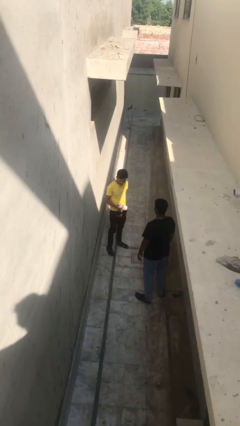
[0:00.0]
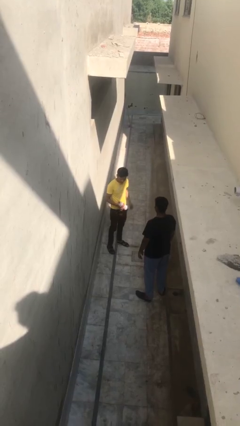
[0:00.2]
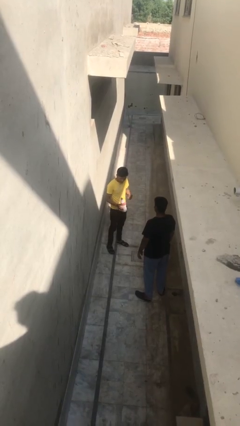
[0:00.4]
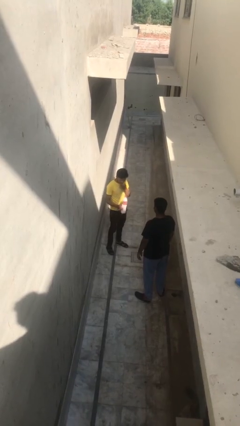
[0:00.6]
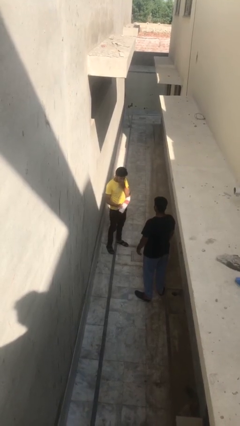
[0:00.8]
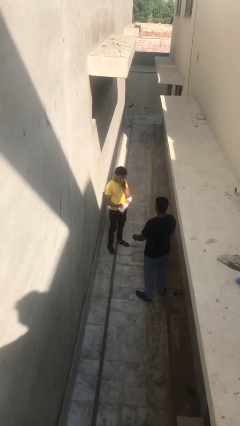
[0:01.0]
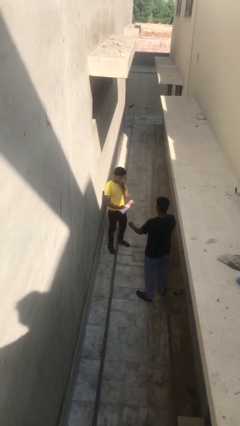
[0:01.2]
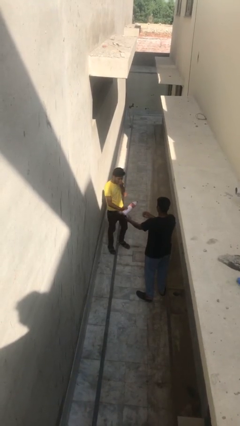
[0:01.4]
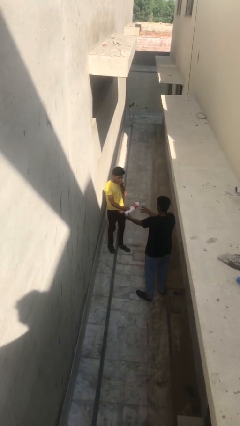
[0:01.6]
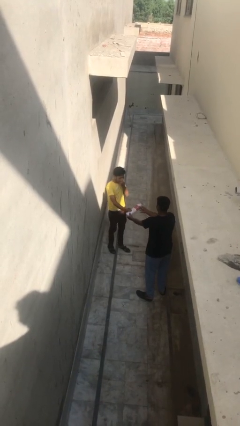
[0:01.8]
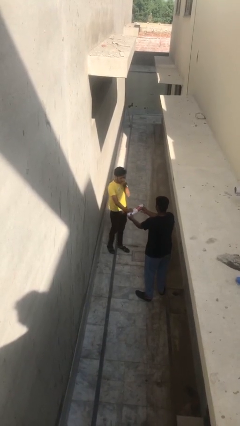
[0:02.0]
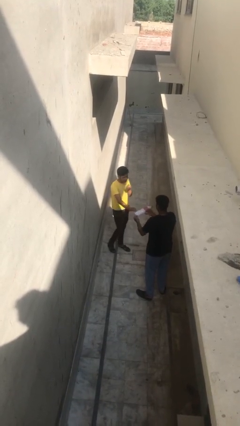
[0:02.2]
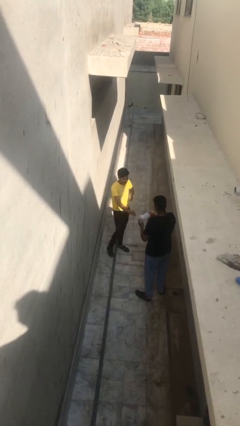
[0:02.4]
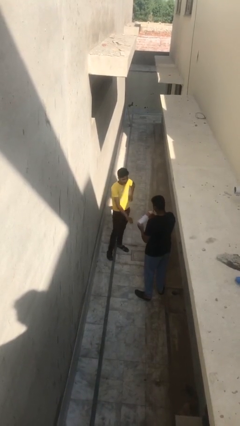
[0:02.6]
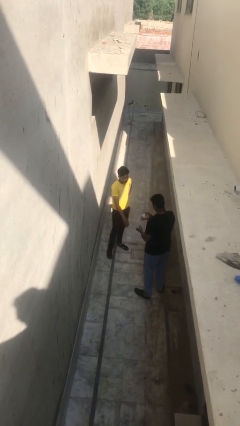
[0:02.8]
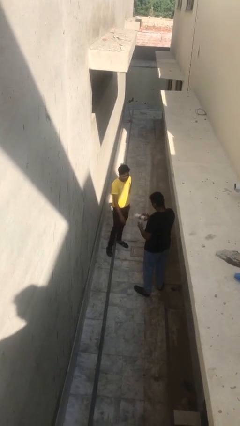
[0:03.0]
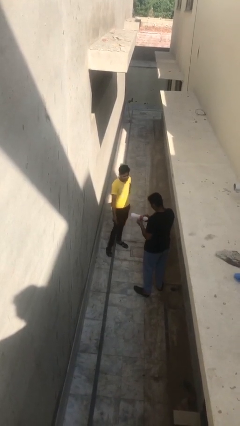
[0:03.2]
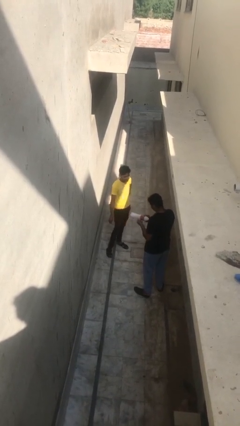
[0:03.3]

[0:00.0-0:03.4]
person transfers object to person

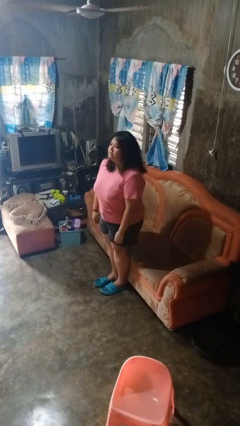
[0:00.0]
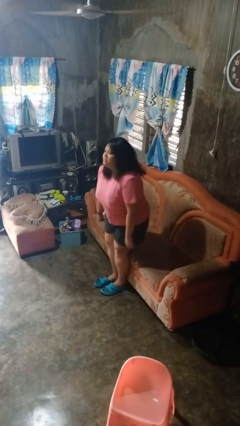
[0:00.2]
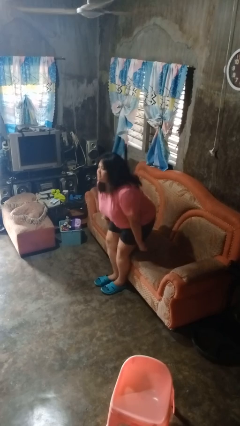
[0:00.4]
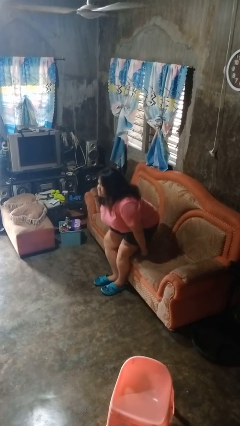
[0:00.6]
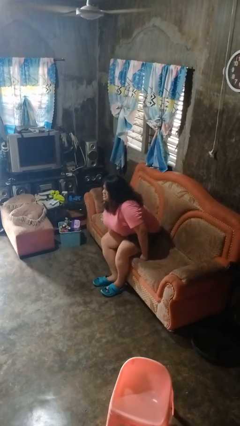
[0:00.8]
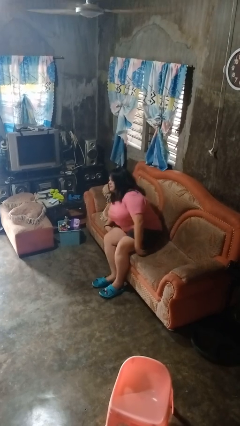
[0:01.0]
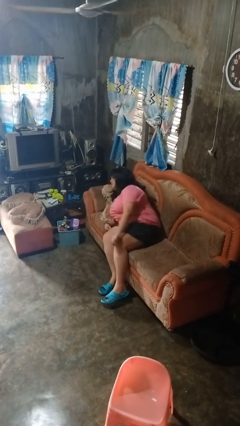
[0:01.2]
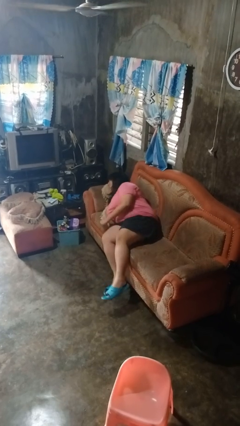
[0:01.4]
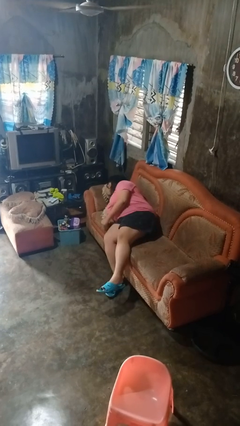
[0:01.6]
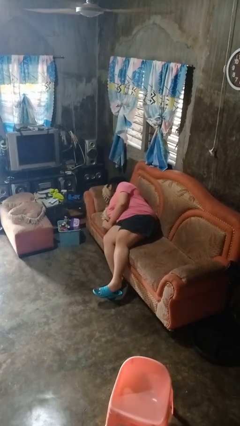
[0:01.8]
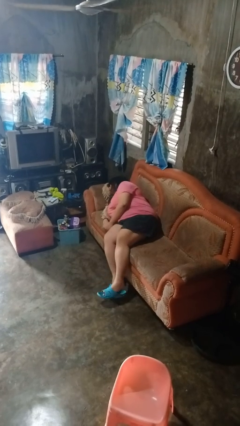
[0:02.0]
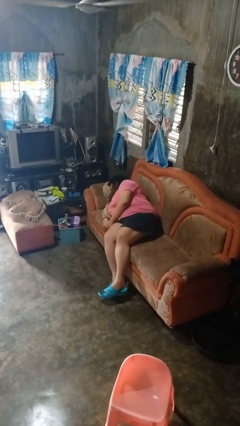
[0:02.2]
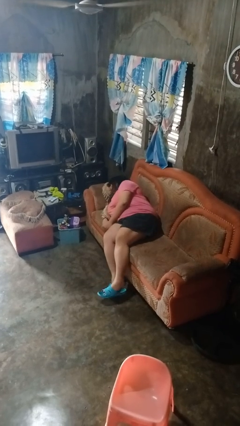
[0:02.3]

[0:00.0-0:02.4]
person lies down on couch

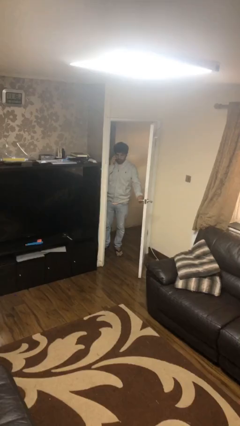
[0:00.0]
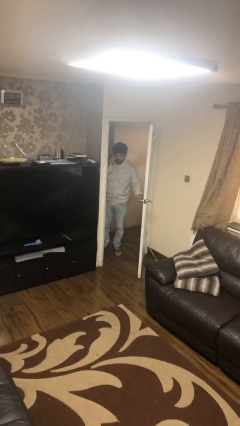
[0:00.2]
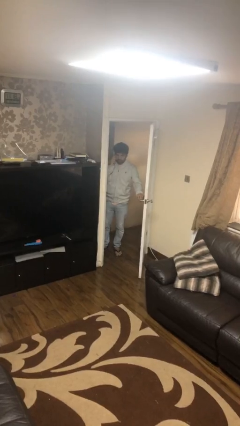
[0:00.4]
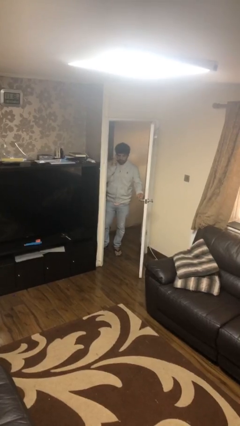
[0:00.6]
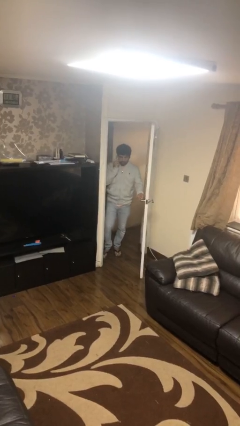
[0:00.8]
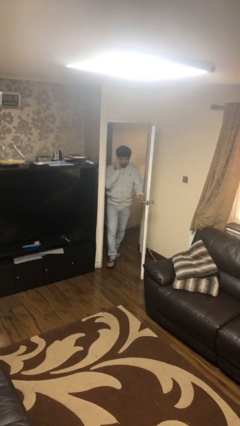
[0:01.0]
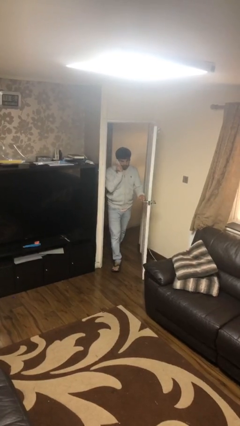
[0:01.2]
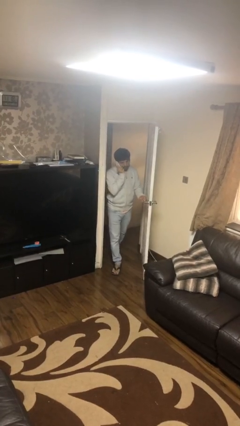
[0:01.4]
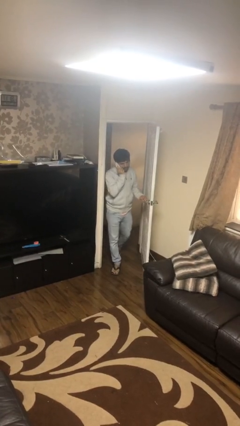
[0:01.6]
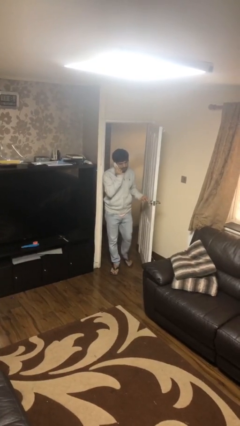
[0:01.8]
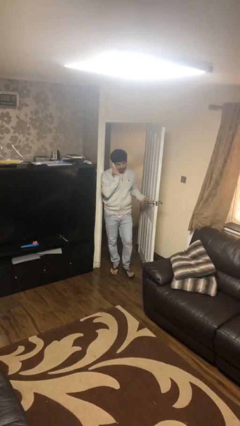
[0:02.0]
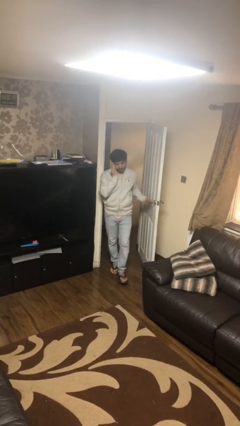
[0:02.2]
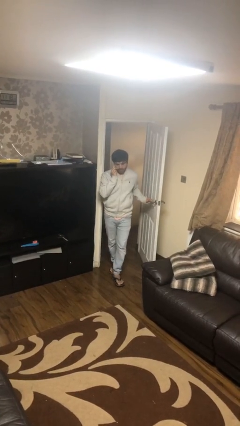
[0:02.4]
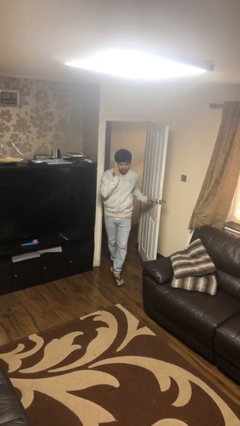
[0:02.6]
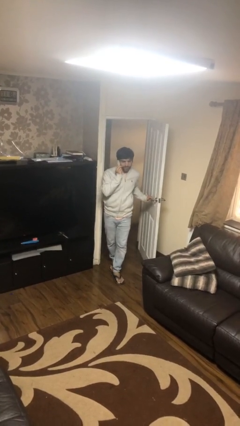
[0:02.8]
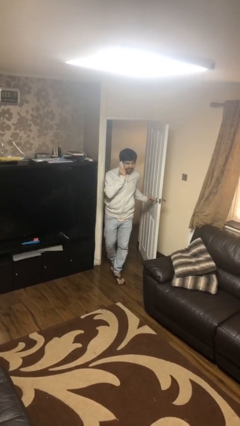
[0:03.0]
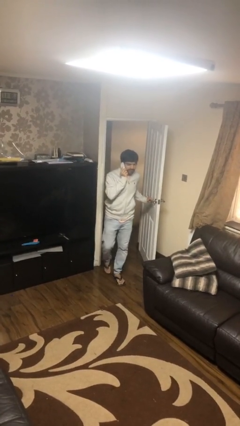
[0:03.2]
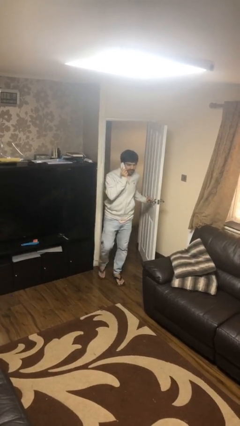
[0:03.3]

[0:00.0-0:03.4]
person enters scene through structure

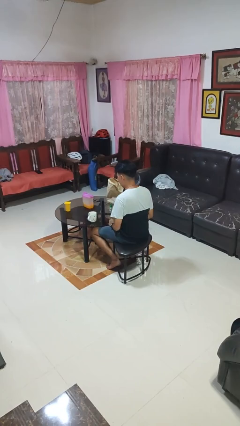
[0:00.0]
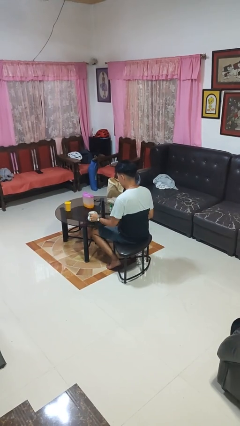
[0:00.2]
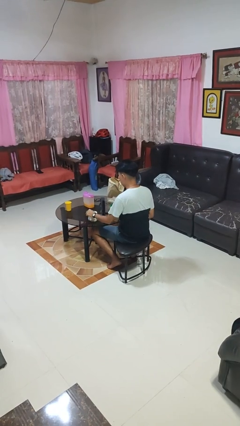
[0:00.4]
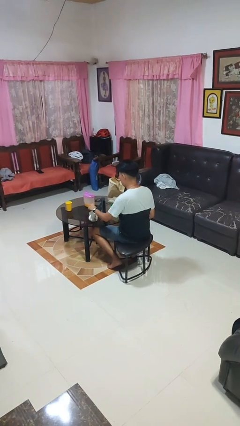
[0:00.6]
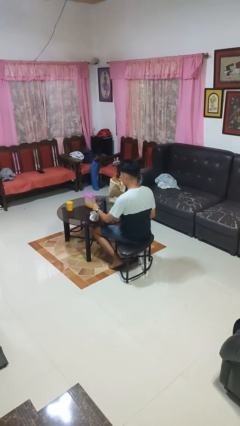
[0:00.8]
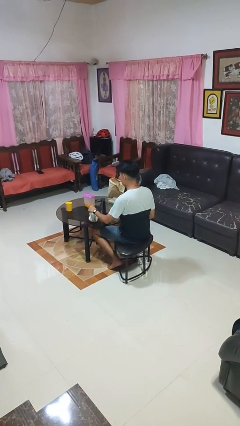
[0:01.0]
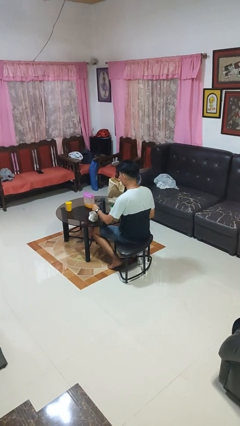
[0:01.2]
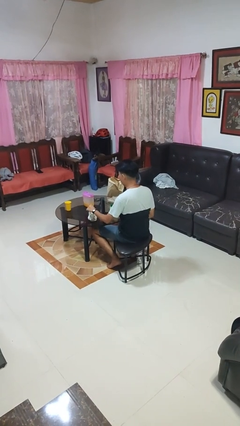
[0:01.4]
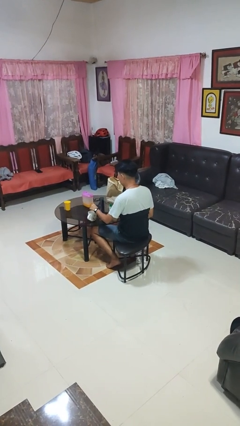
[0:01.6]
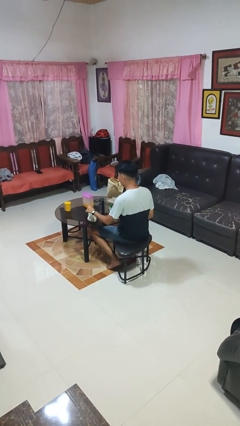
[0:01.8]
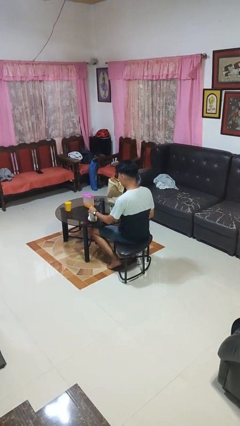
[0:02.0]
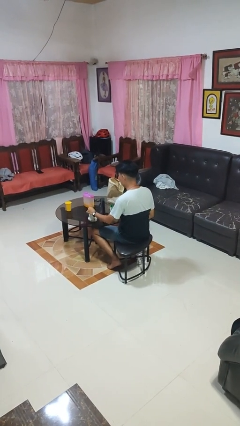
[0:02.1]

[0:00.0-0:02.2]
person stirs mug

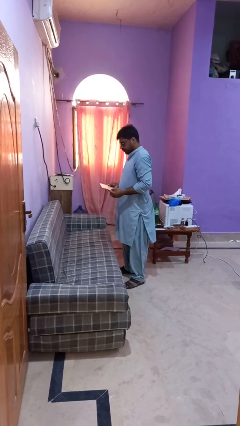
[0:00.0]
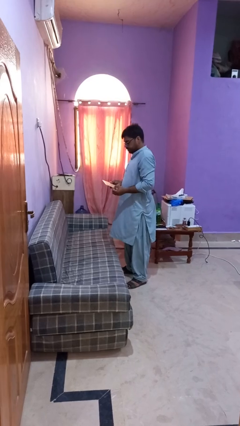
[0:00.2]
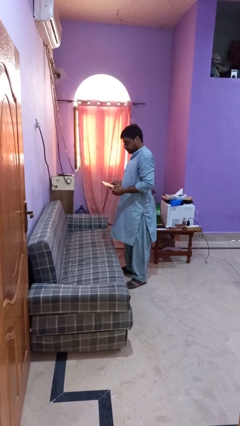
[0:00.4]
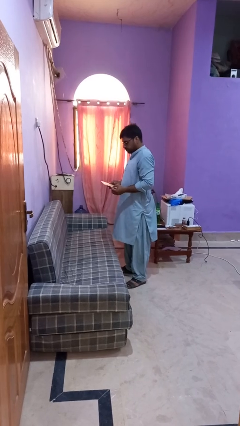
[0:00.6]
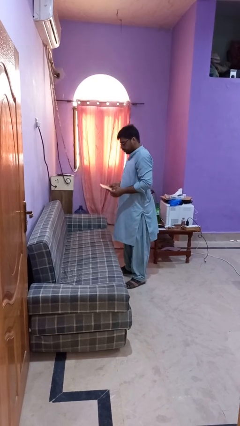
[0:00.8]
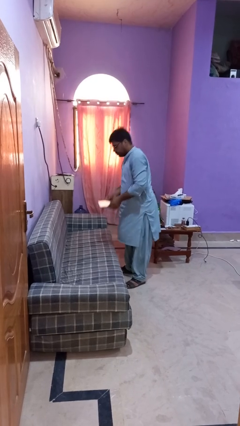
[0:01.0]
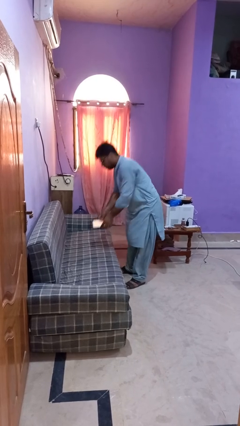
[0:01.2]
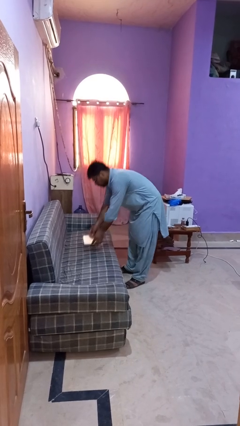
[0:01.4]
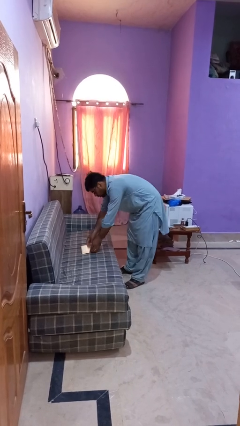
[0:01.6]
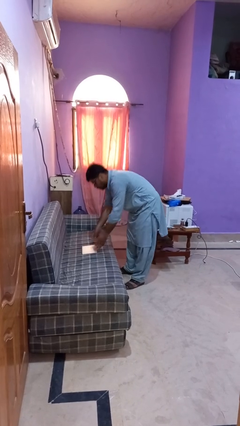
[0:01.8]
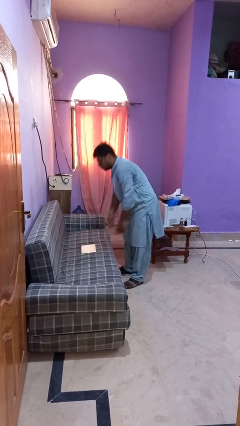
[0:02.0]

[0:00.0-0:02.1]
person puts down object on couch

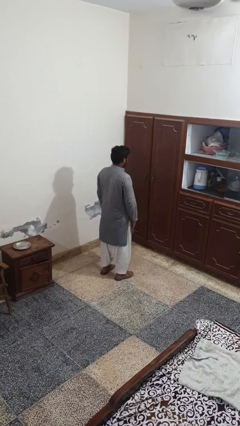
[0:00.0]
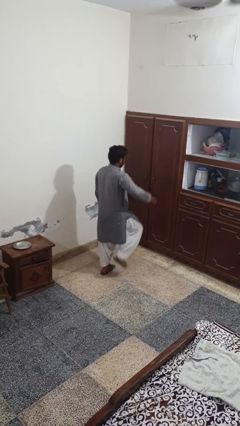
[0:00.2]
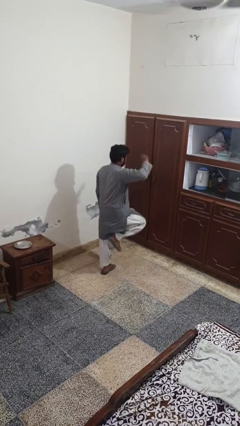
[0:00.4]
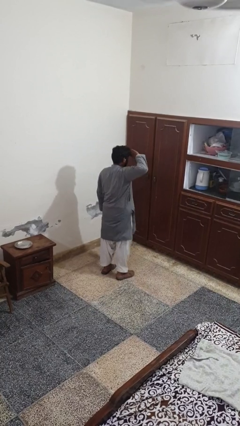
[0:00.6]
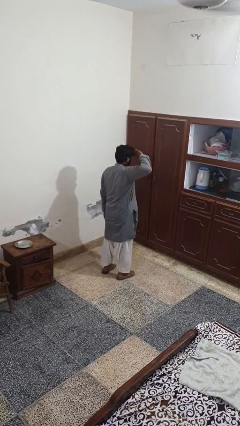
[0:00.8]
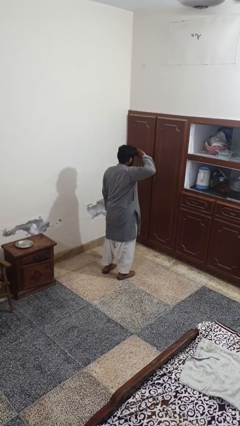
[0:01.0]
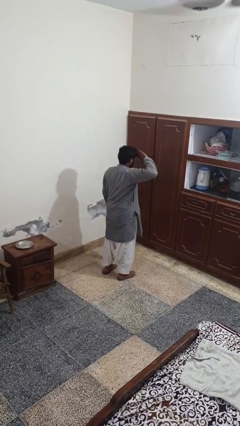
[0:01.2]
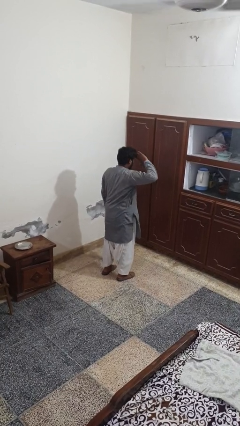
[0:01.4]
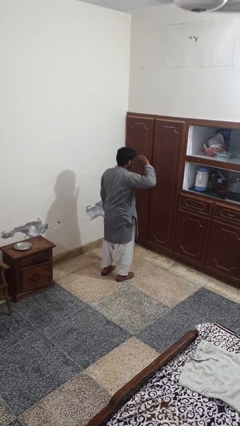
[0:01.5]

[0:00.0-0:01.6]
person salutes

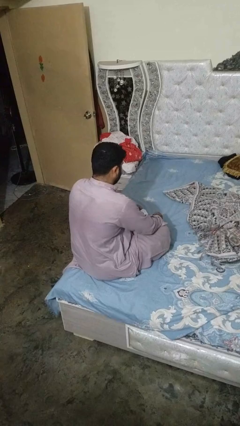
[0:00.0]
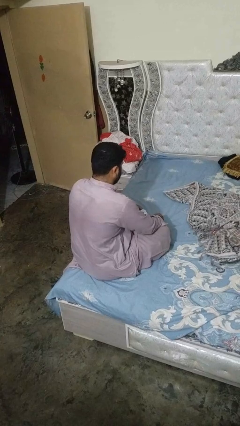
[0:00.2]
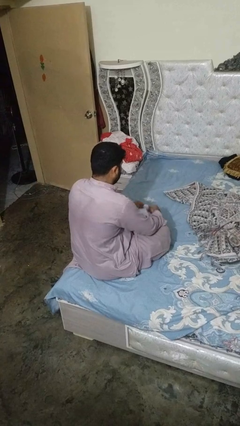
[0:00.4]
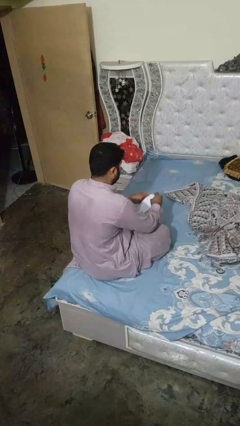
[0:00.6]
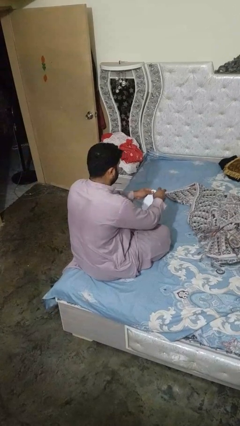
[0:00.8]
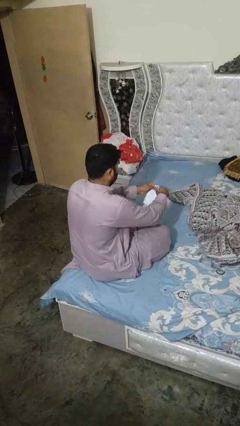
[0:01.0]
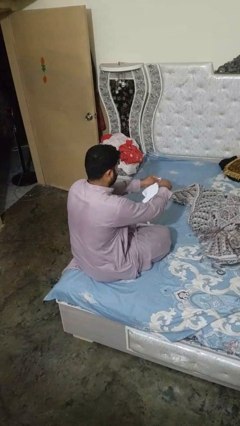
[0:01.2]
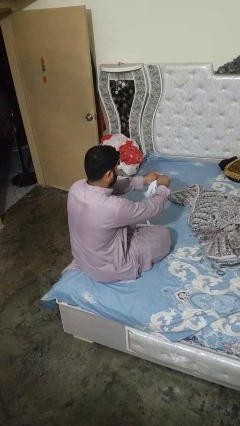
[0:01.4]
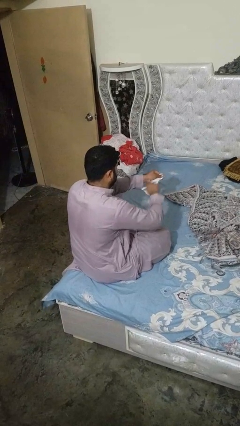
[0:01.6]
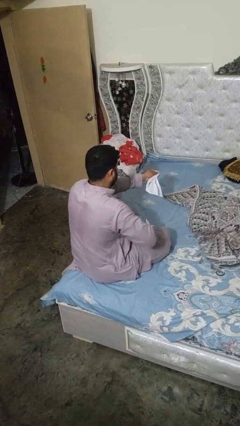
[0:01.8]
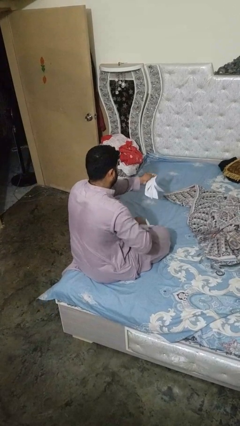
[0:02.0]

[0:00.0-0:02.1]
person tears paper
